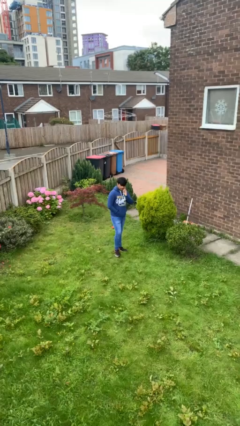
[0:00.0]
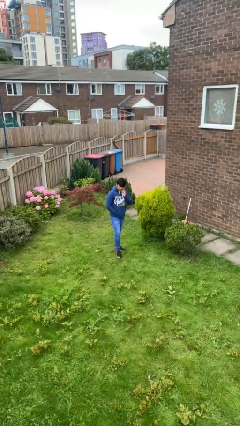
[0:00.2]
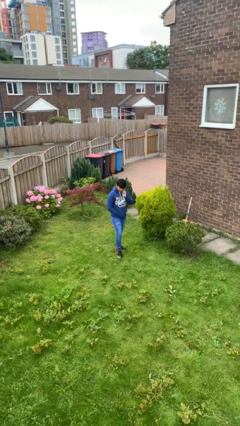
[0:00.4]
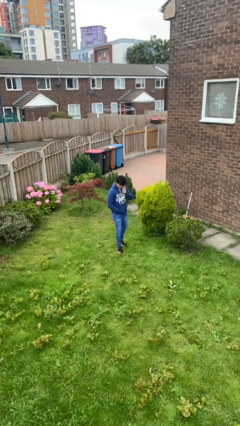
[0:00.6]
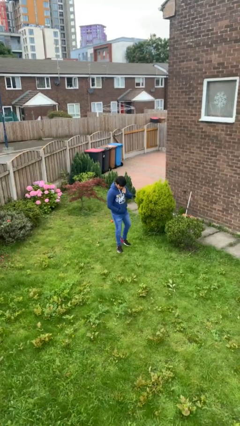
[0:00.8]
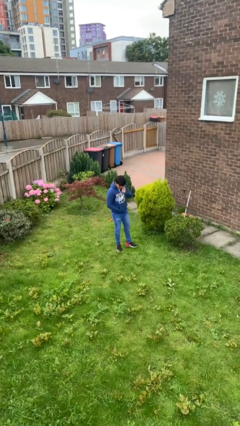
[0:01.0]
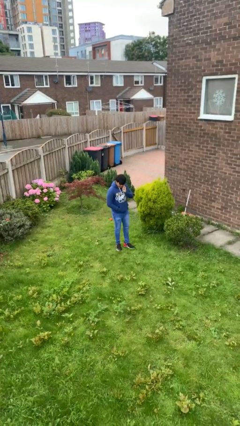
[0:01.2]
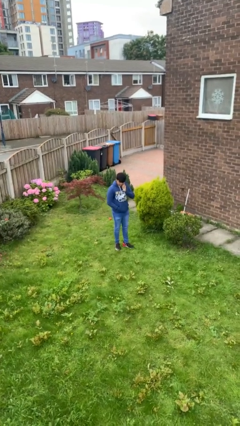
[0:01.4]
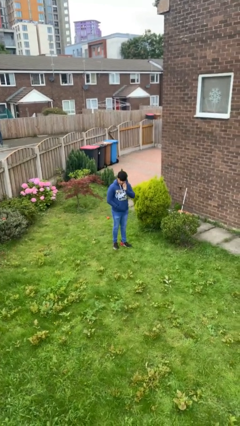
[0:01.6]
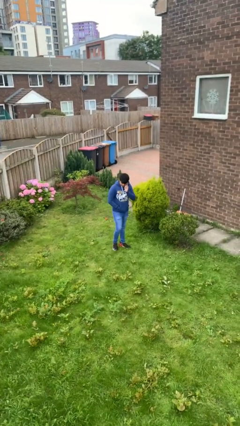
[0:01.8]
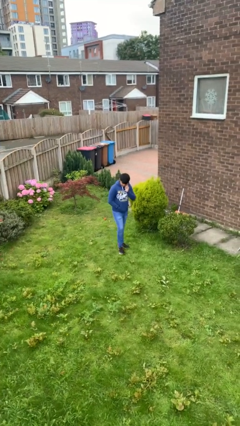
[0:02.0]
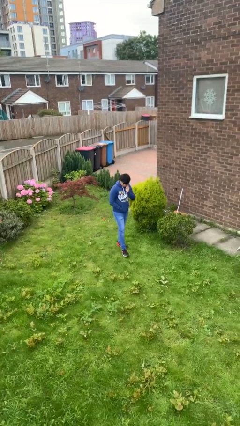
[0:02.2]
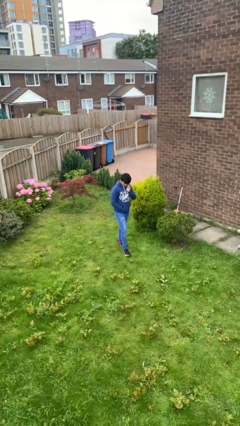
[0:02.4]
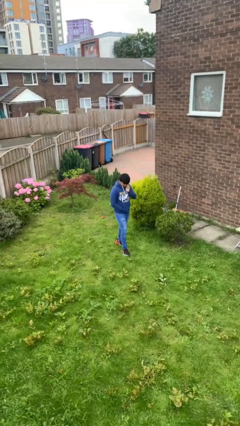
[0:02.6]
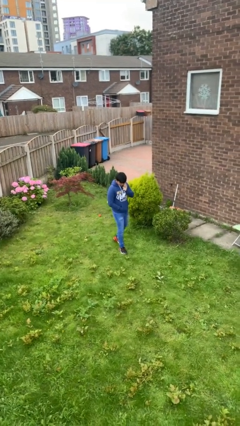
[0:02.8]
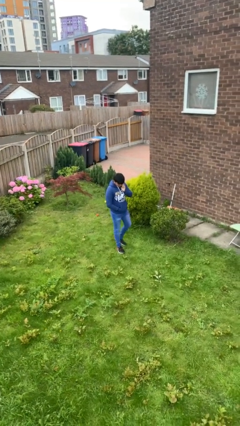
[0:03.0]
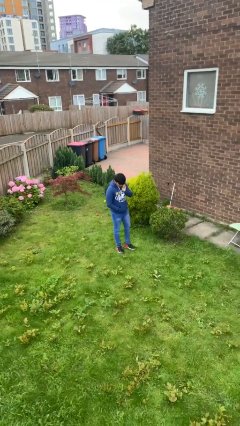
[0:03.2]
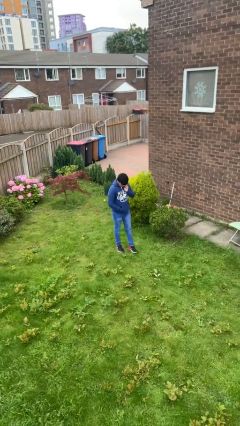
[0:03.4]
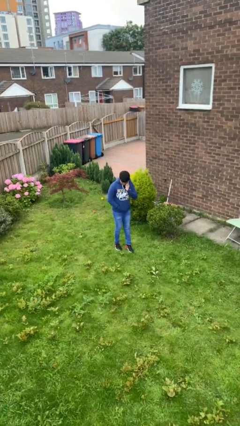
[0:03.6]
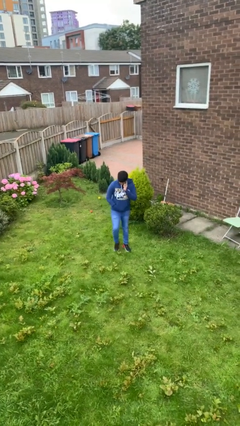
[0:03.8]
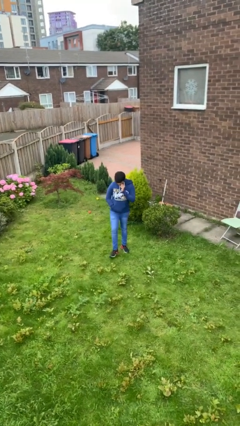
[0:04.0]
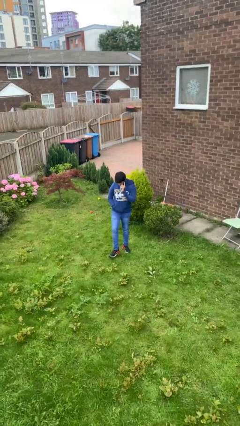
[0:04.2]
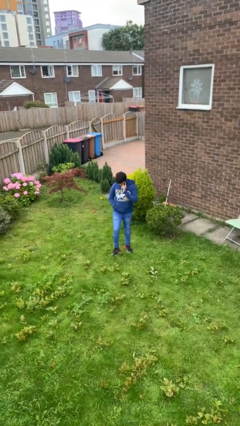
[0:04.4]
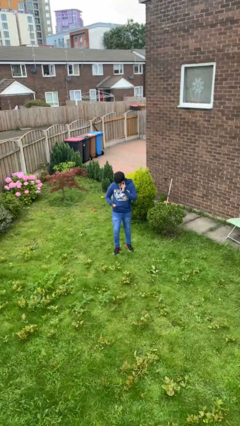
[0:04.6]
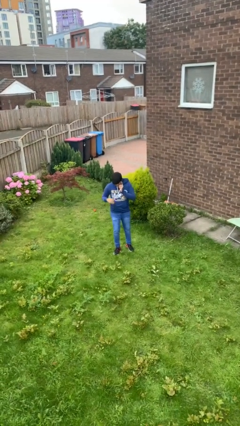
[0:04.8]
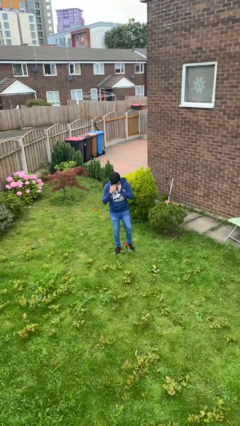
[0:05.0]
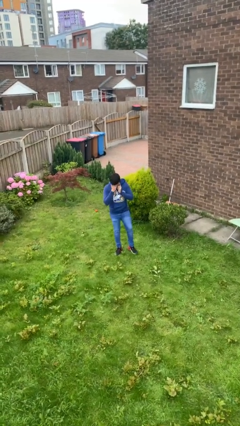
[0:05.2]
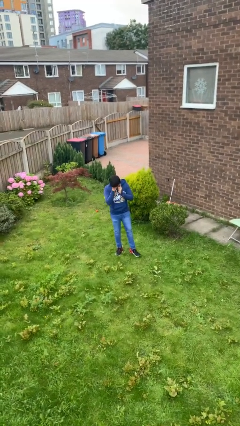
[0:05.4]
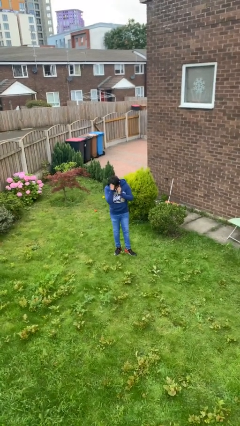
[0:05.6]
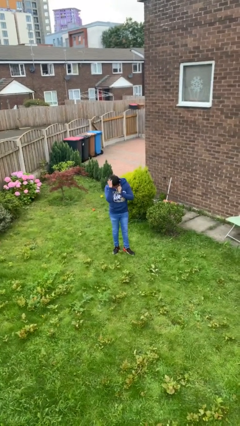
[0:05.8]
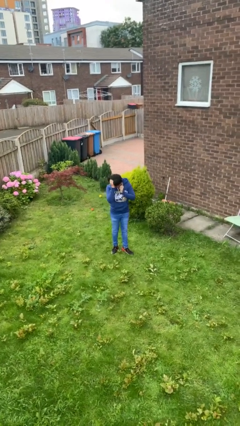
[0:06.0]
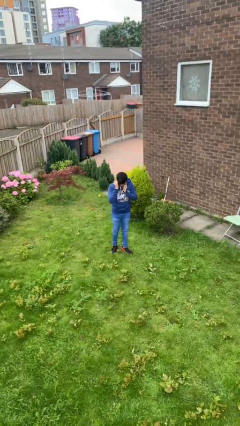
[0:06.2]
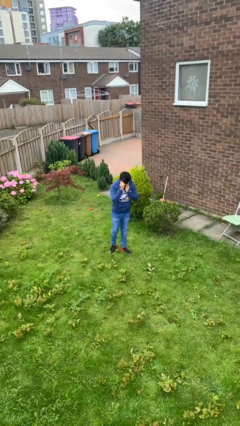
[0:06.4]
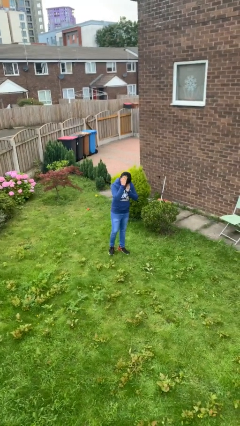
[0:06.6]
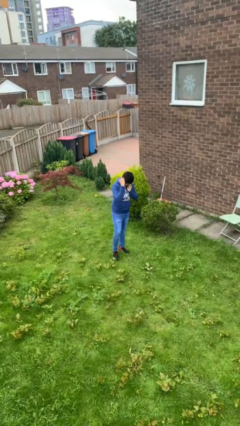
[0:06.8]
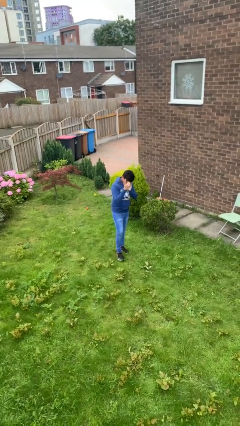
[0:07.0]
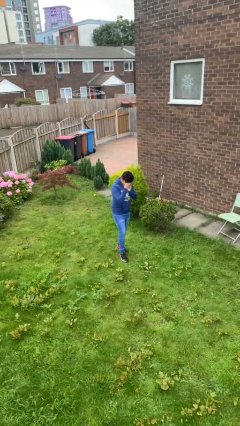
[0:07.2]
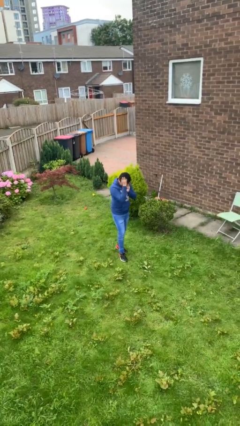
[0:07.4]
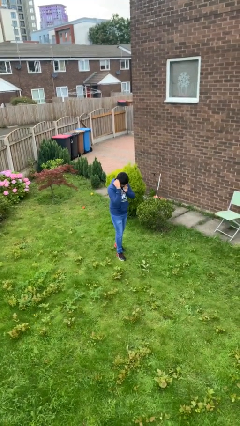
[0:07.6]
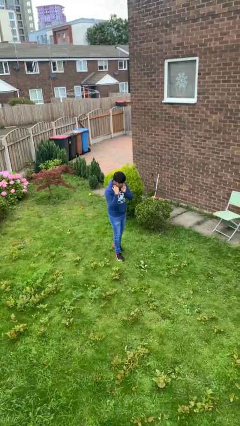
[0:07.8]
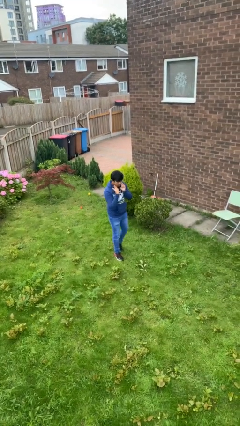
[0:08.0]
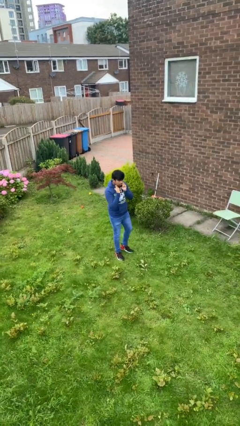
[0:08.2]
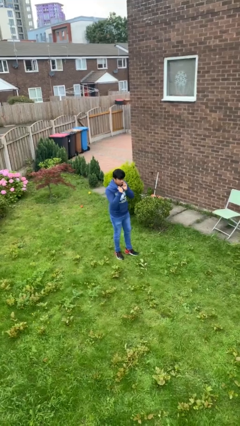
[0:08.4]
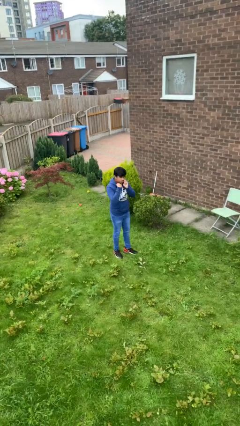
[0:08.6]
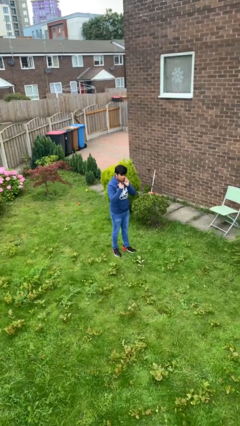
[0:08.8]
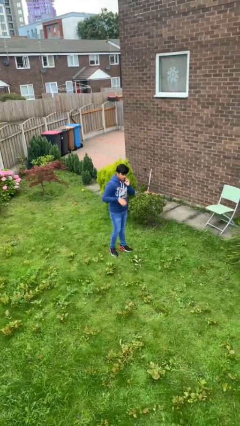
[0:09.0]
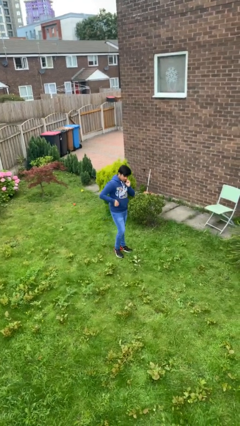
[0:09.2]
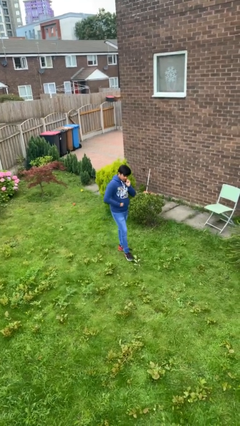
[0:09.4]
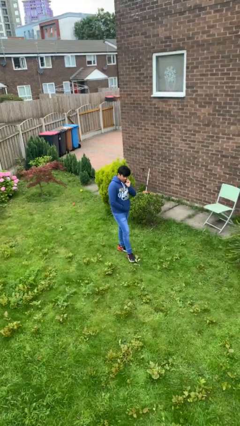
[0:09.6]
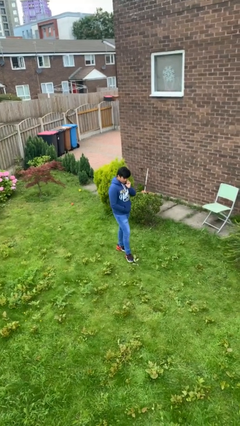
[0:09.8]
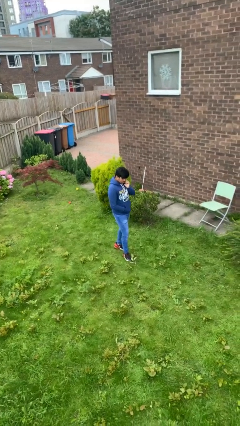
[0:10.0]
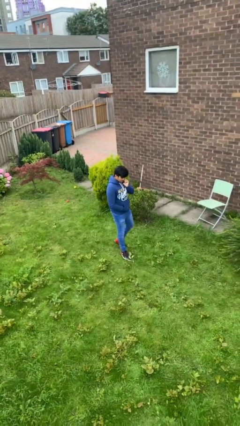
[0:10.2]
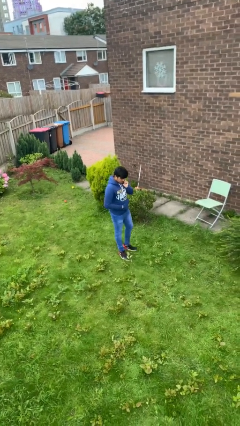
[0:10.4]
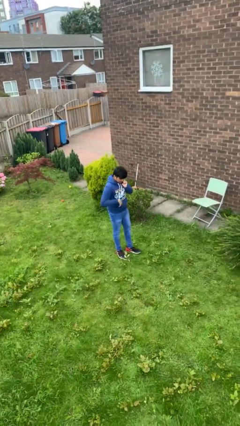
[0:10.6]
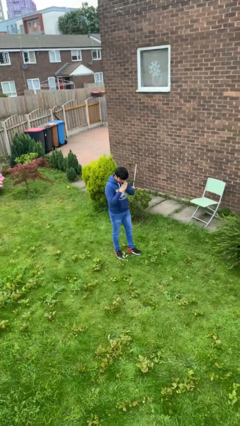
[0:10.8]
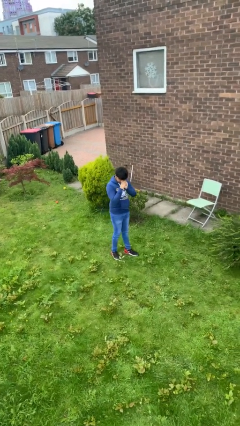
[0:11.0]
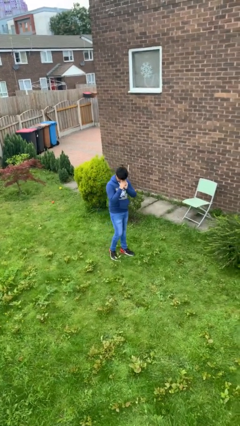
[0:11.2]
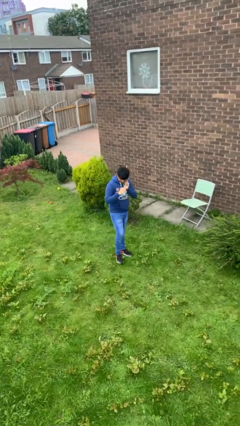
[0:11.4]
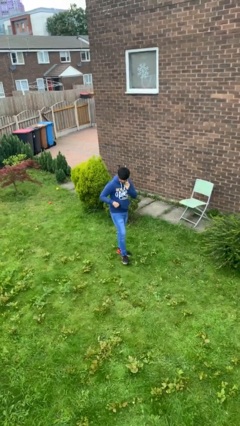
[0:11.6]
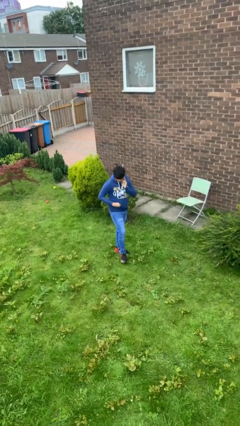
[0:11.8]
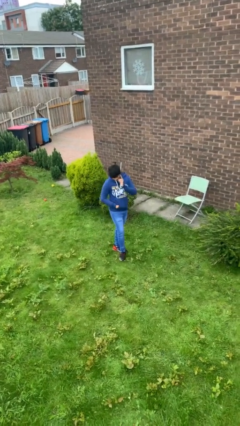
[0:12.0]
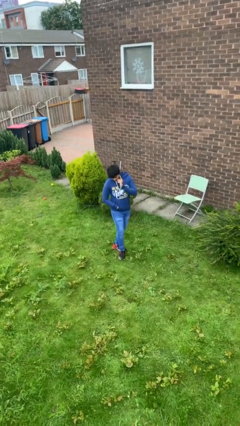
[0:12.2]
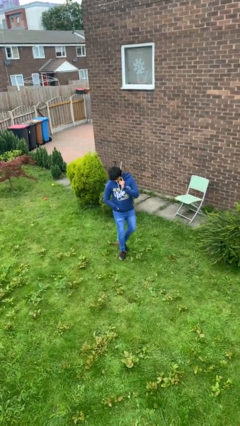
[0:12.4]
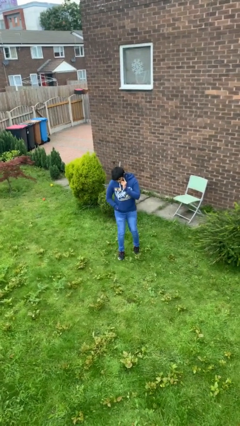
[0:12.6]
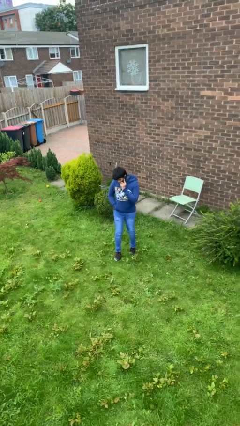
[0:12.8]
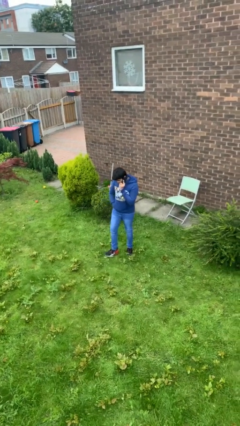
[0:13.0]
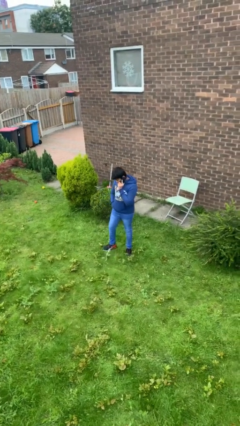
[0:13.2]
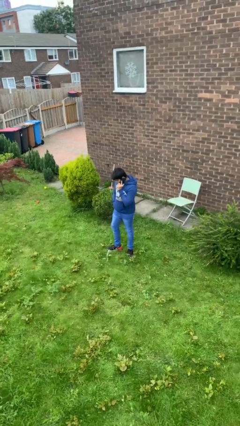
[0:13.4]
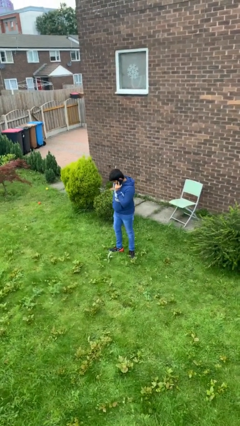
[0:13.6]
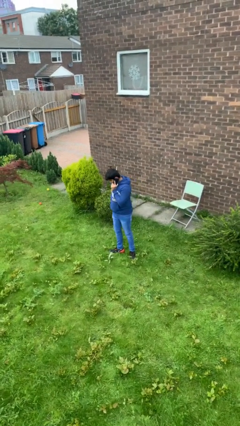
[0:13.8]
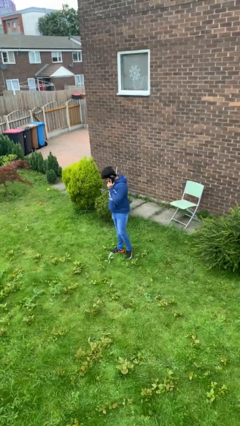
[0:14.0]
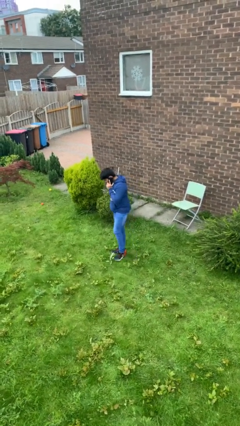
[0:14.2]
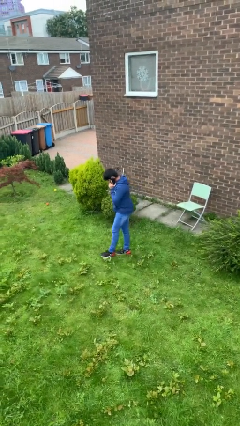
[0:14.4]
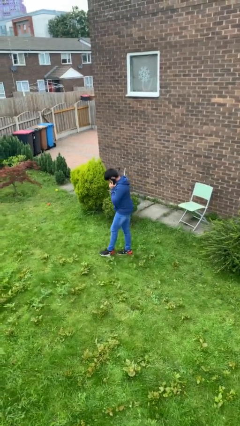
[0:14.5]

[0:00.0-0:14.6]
person talks on phone

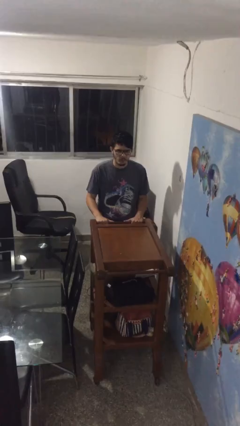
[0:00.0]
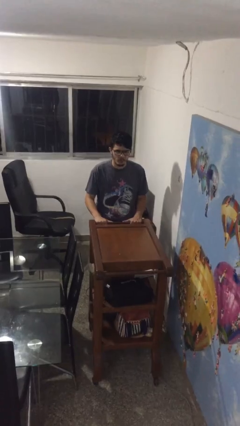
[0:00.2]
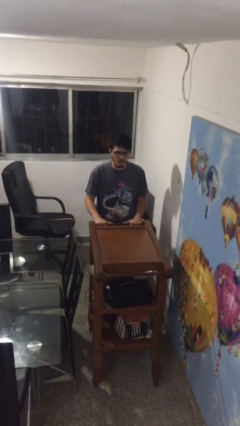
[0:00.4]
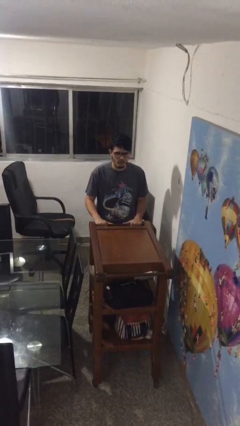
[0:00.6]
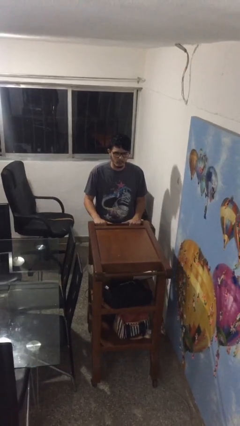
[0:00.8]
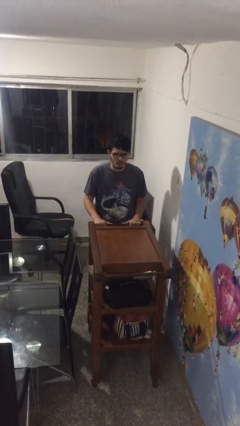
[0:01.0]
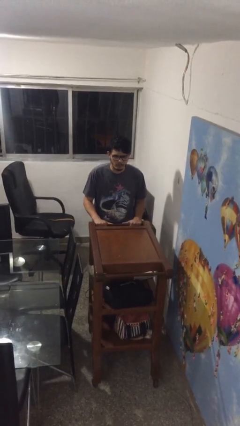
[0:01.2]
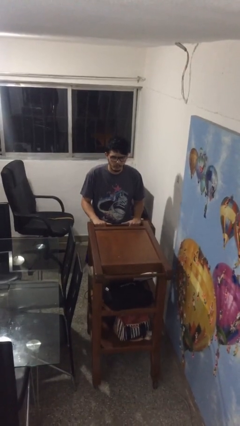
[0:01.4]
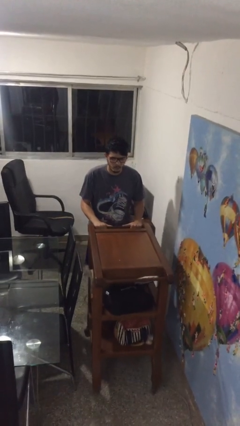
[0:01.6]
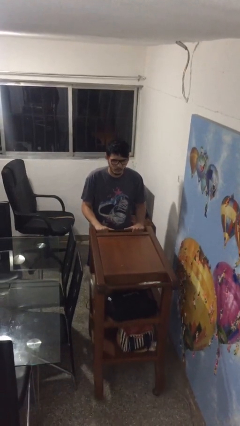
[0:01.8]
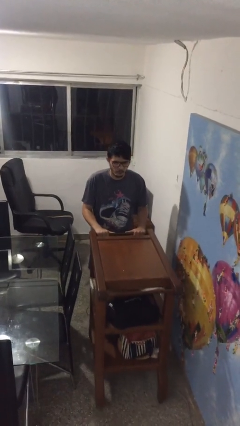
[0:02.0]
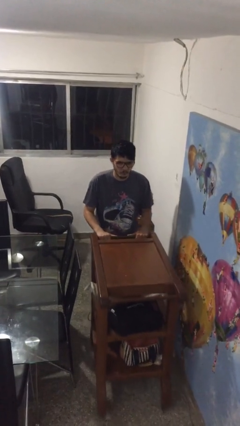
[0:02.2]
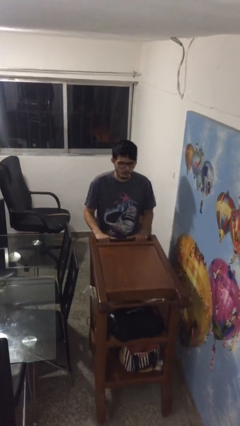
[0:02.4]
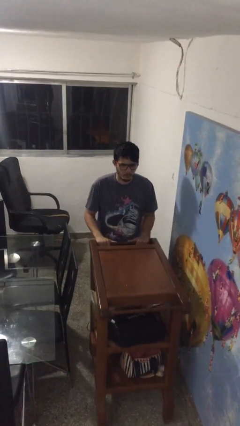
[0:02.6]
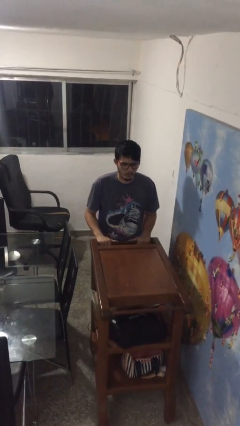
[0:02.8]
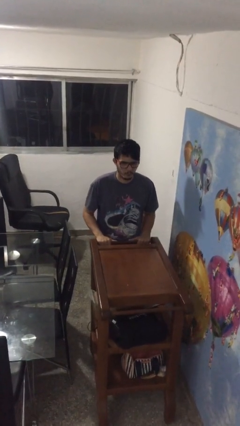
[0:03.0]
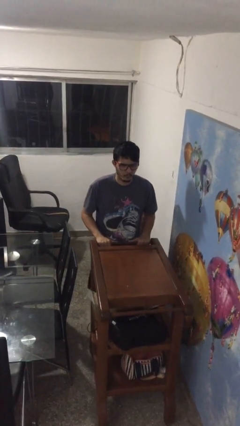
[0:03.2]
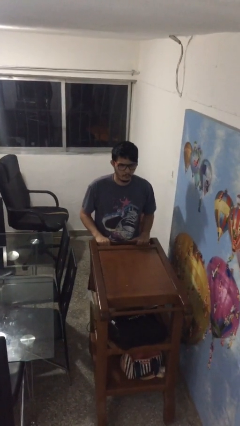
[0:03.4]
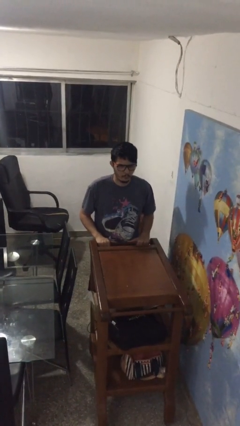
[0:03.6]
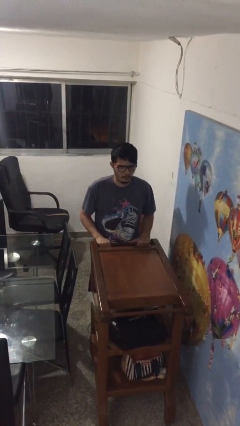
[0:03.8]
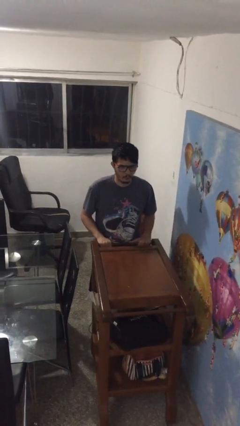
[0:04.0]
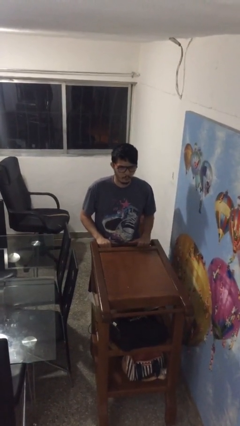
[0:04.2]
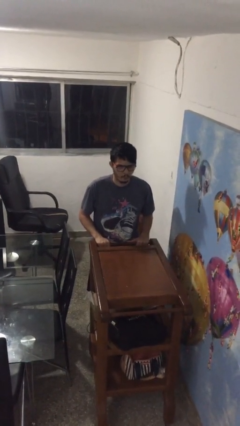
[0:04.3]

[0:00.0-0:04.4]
person pushes wheeled cart
